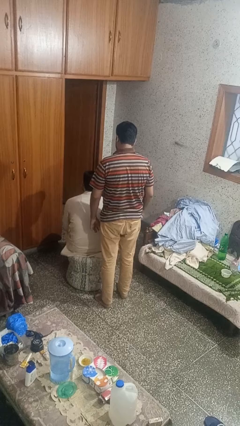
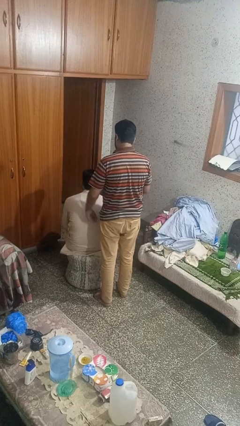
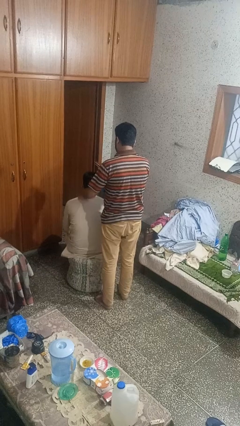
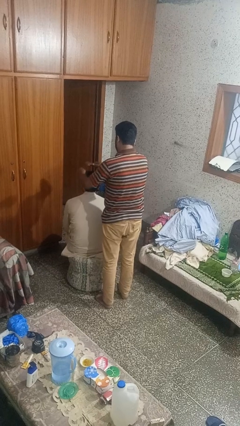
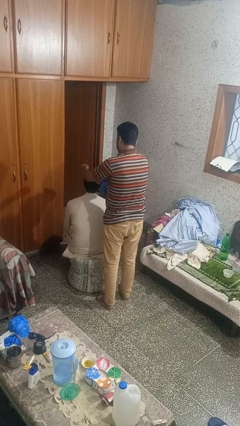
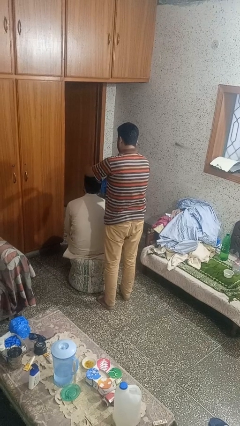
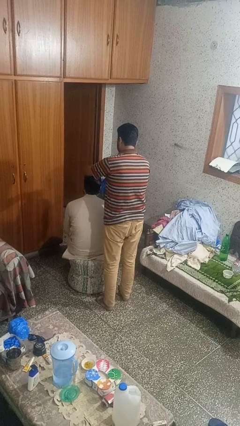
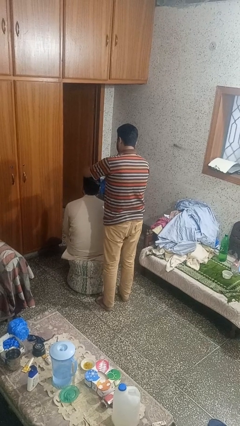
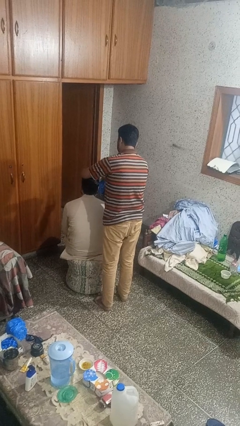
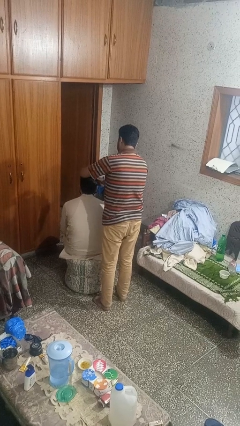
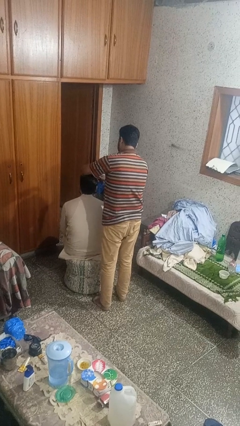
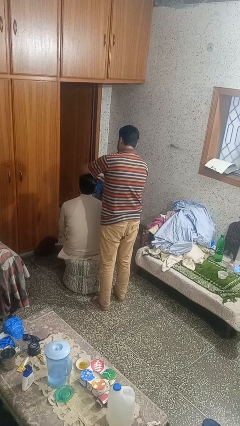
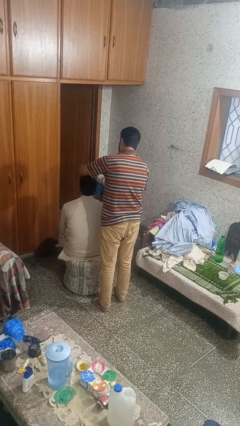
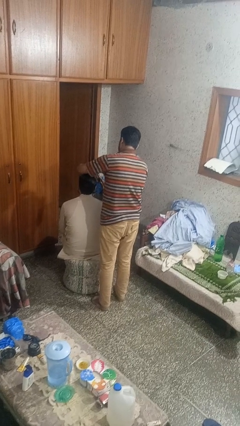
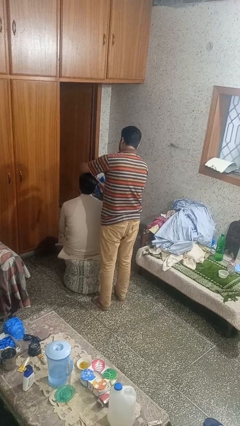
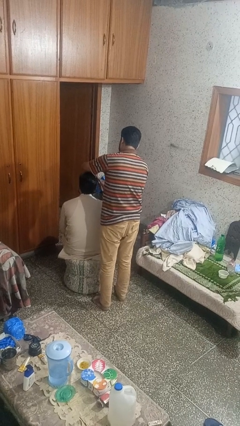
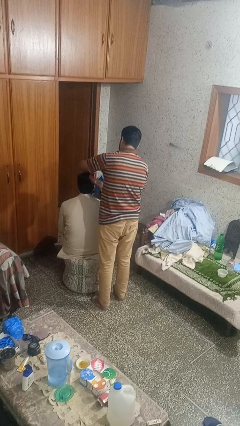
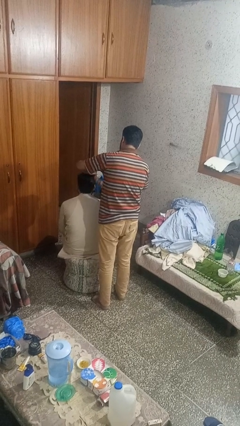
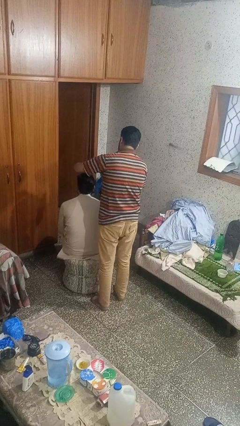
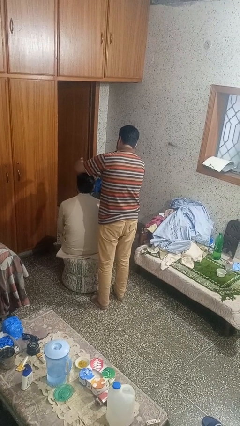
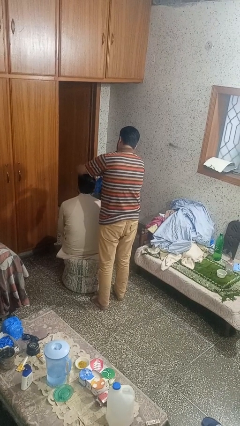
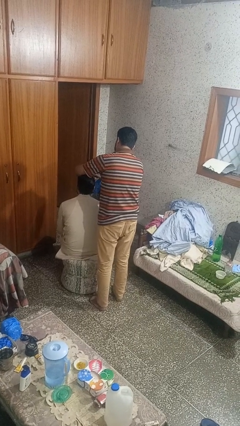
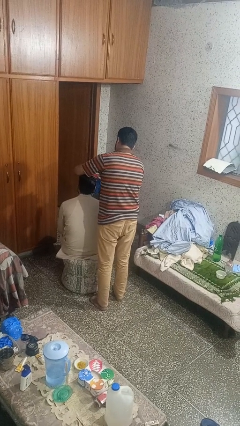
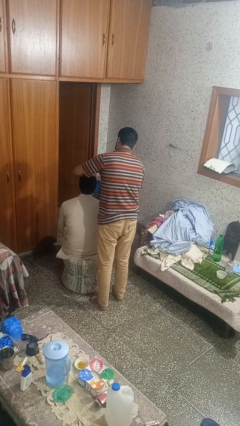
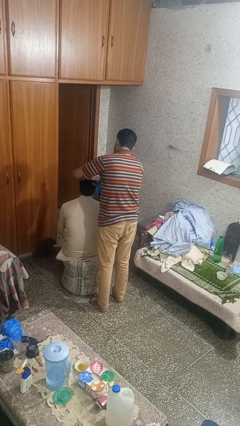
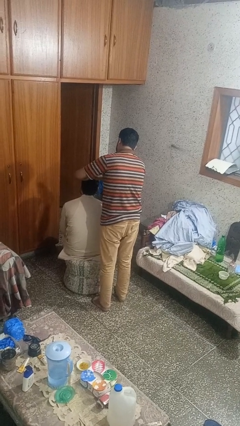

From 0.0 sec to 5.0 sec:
person brushes hair of person

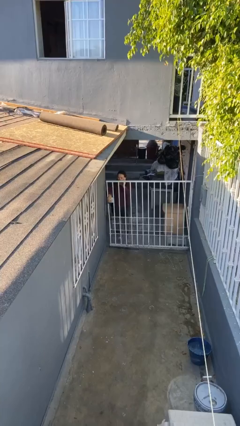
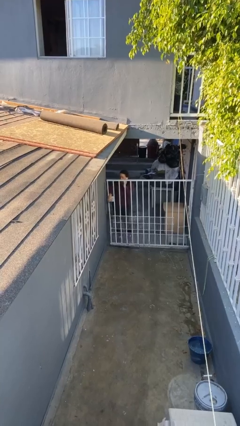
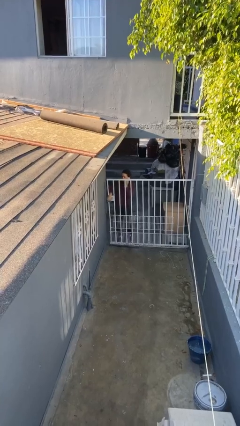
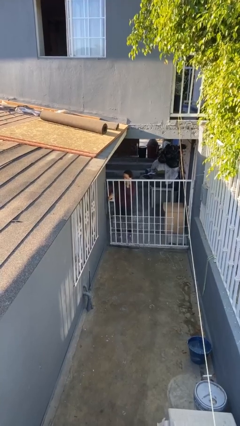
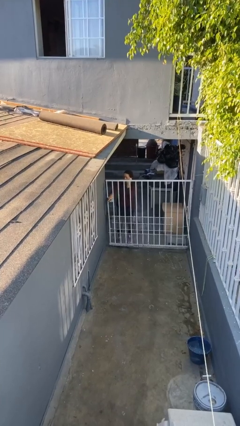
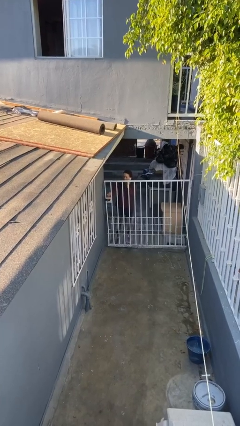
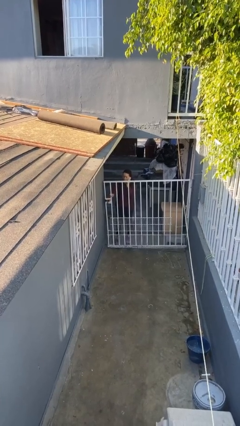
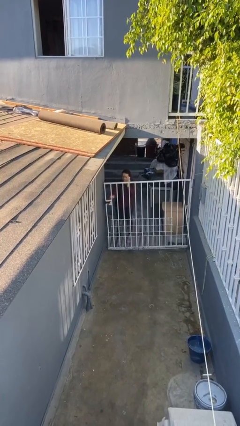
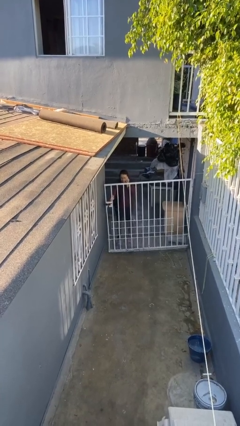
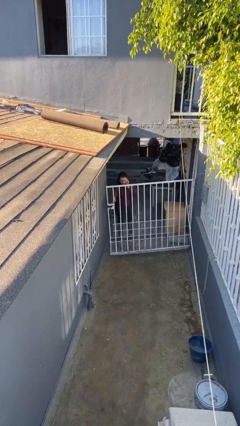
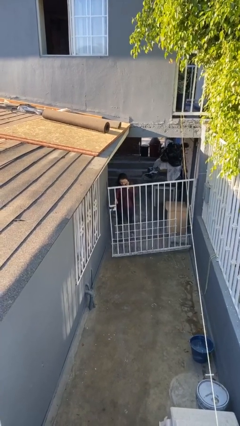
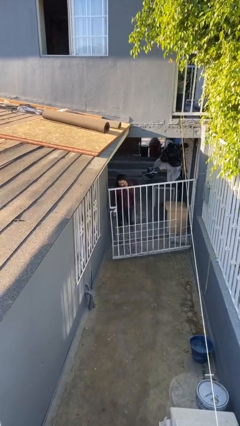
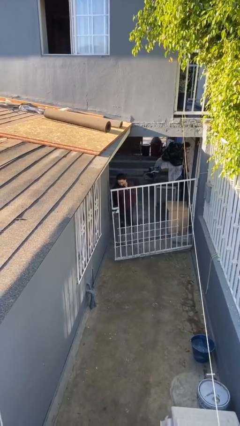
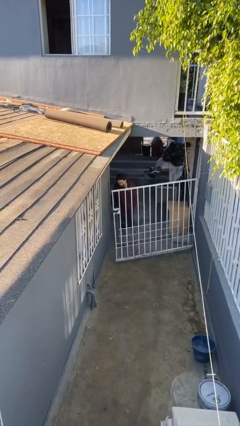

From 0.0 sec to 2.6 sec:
person opens facility door

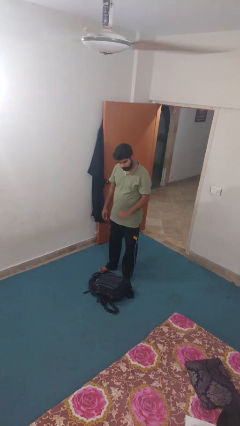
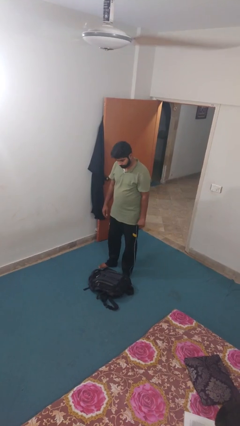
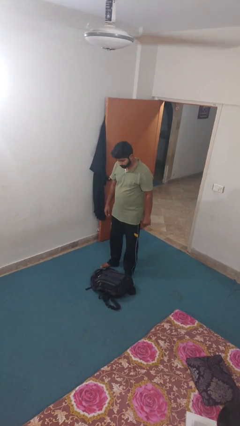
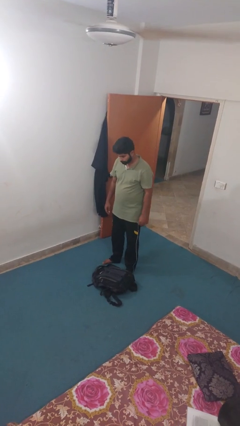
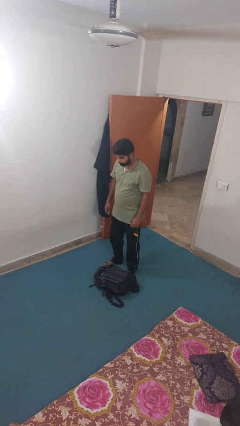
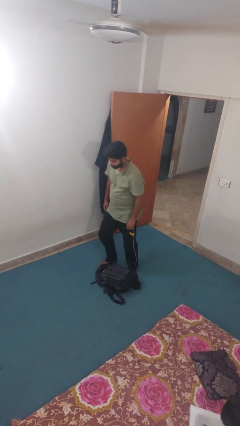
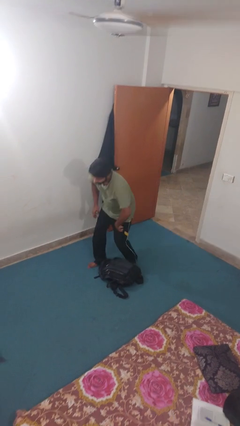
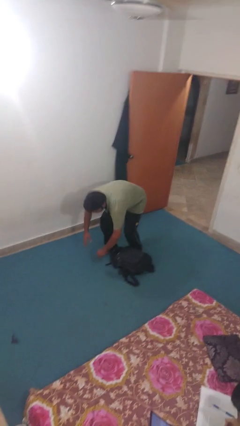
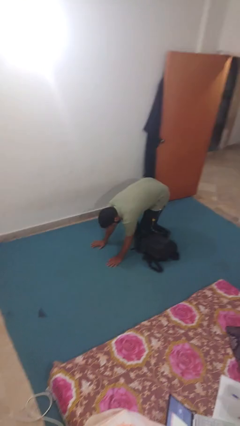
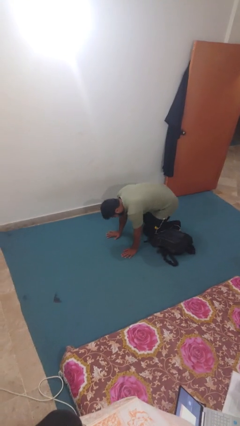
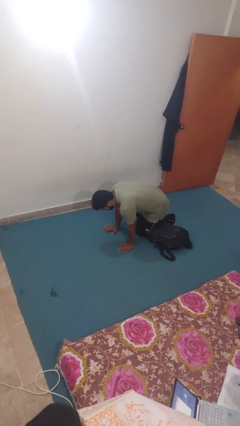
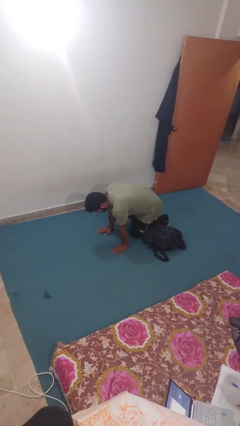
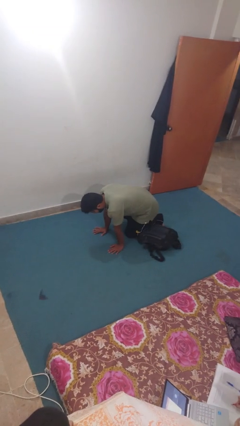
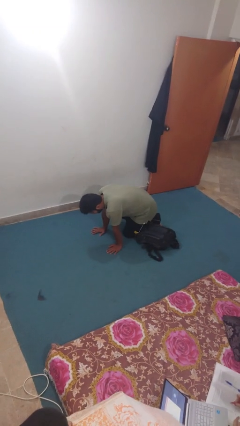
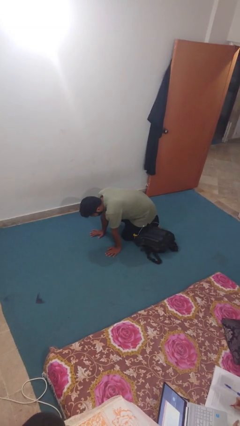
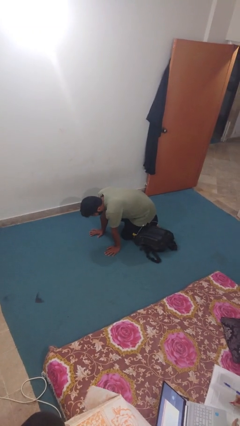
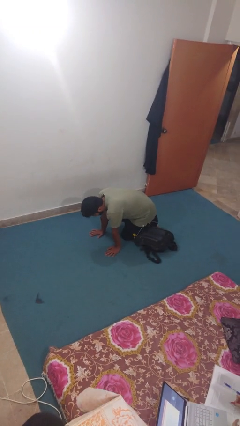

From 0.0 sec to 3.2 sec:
person trips on object on floor

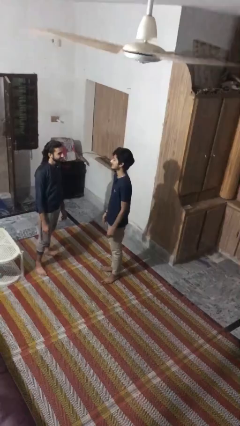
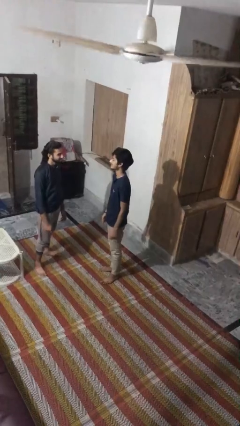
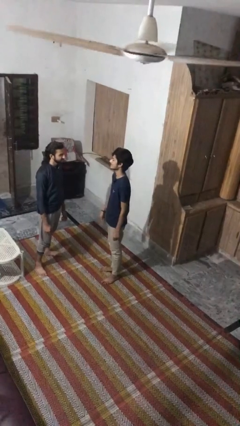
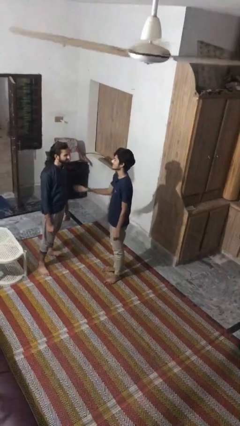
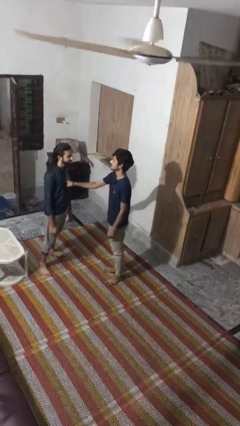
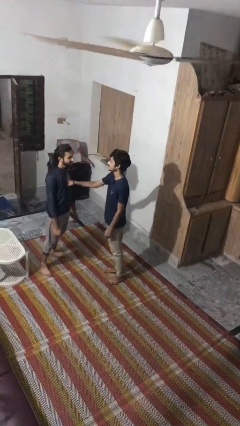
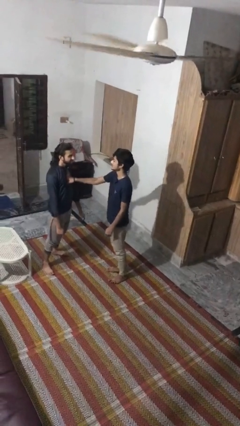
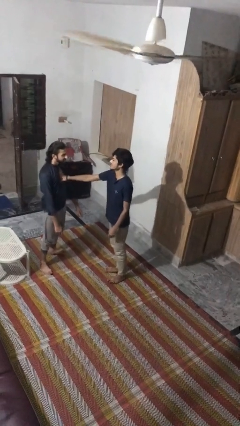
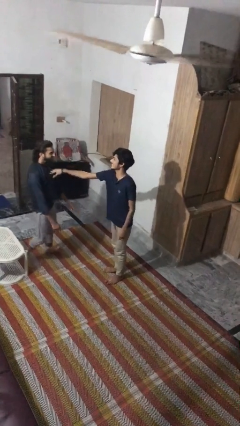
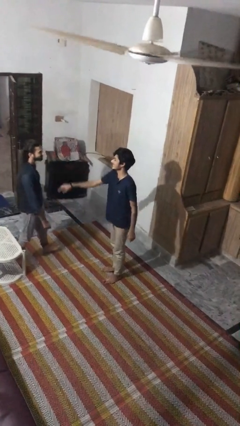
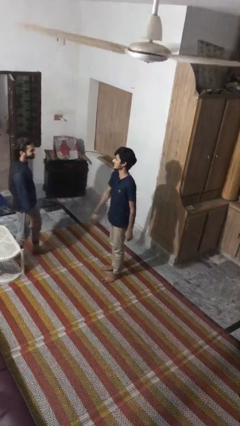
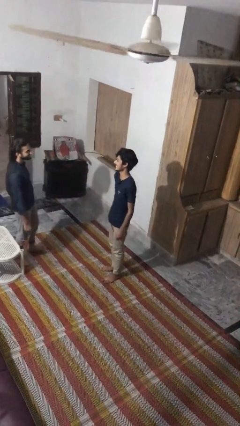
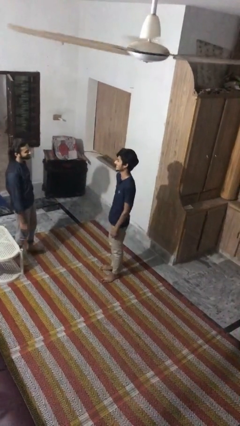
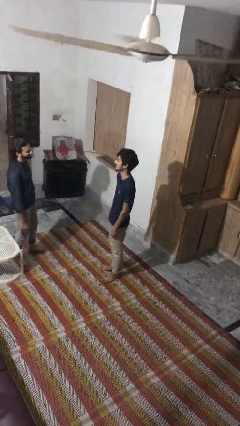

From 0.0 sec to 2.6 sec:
person shoves person

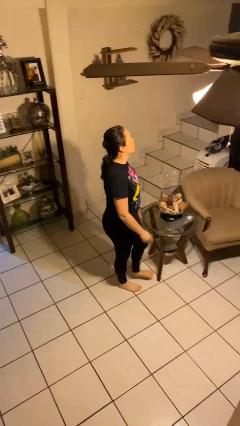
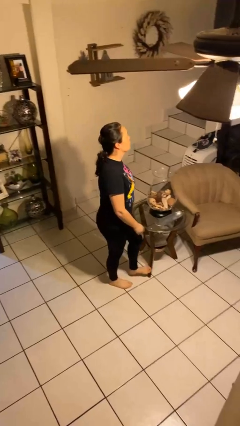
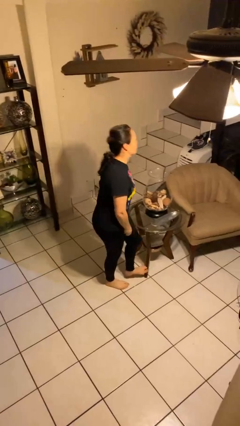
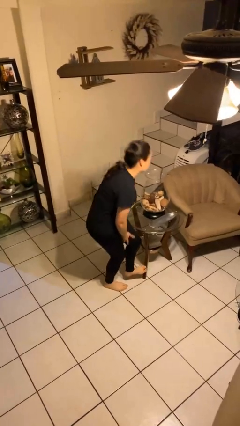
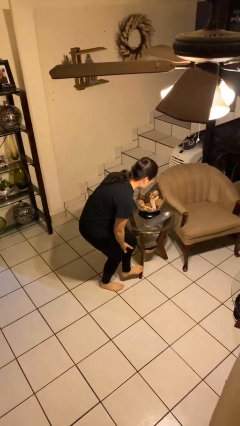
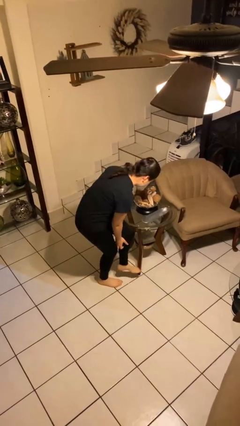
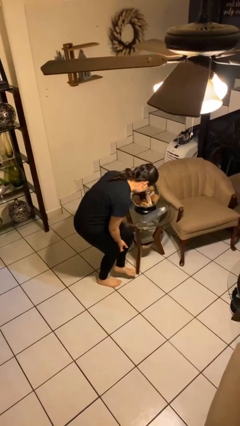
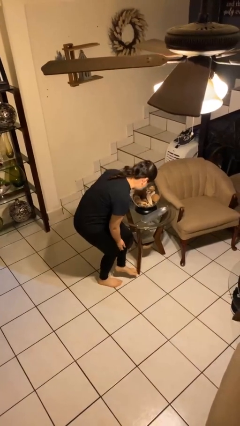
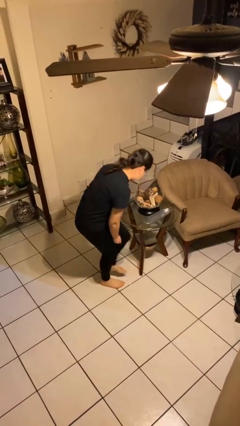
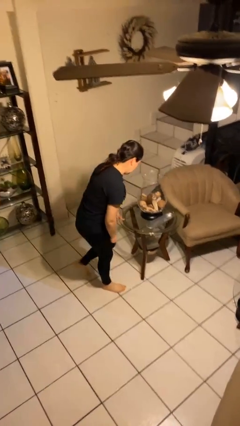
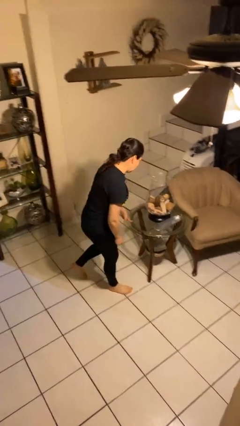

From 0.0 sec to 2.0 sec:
person stubs toe

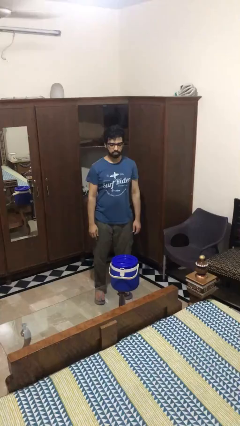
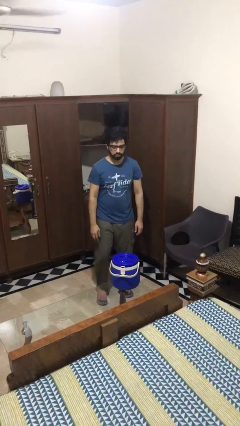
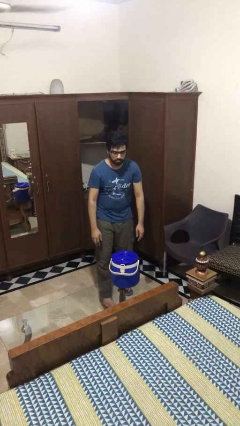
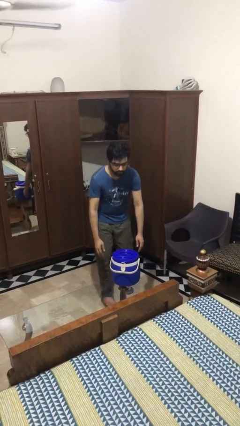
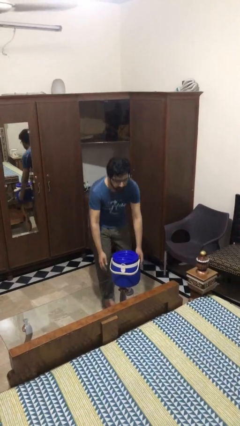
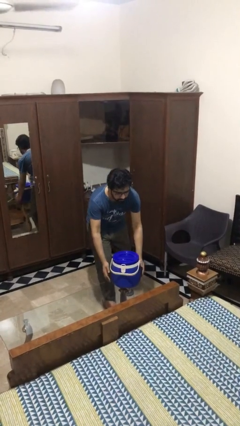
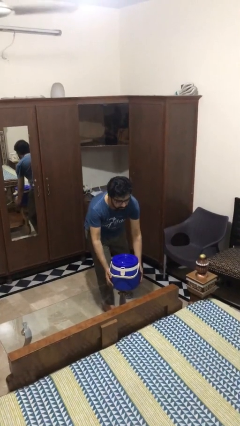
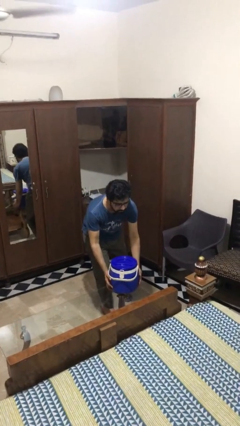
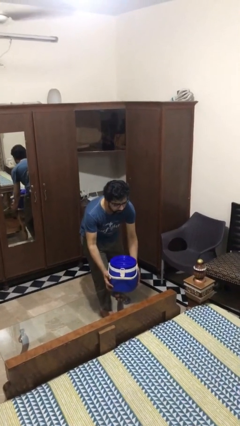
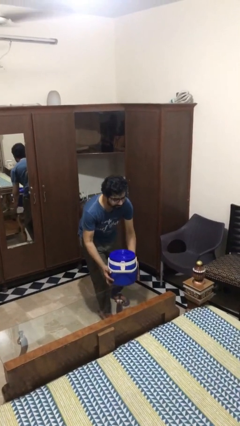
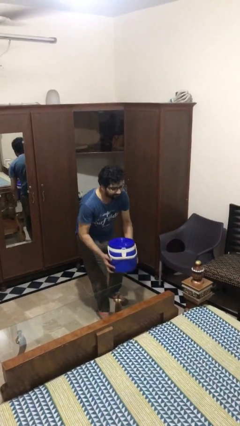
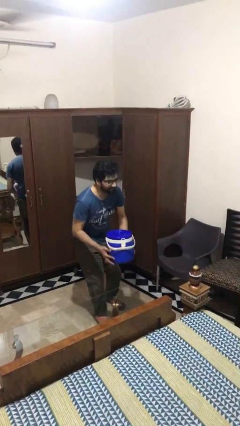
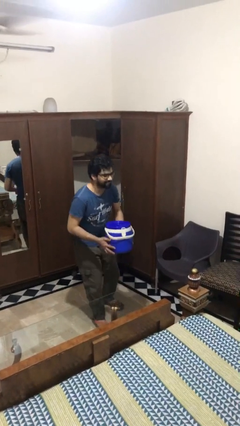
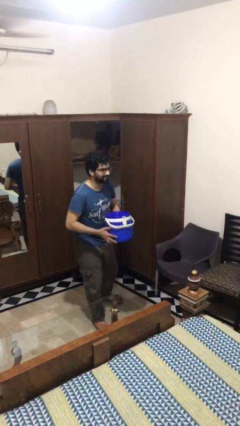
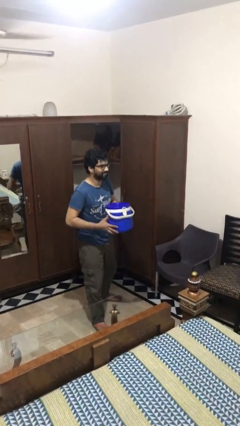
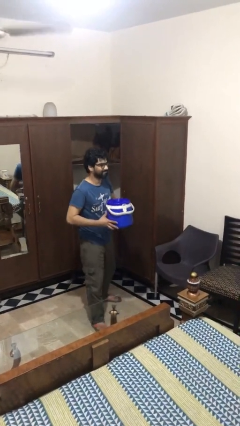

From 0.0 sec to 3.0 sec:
person picks up object from table
